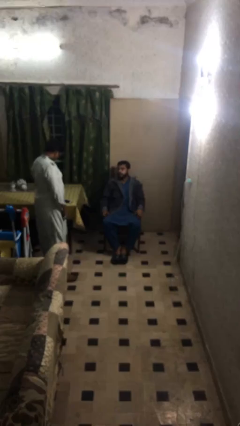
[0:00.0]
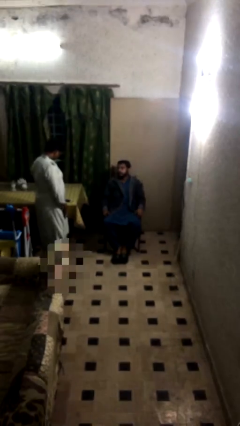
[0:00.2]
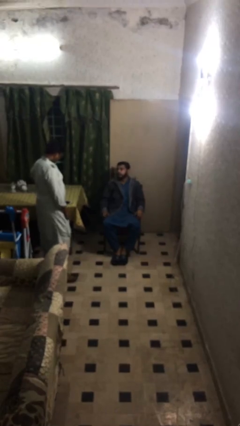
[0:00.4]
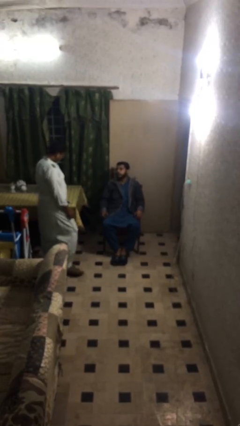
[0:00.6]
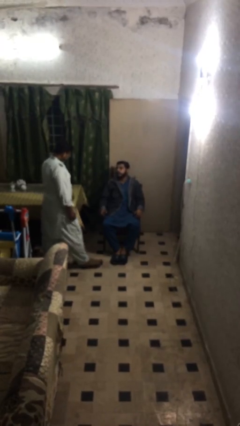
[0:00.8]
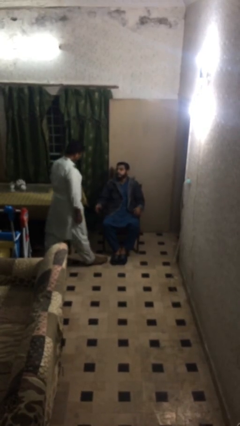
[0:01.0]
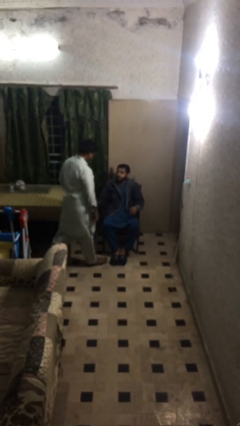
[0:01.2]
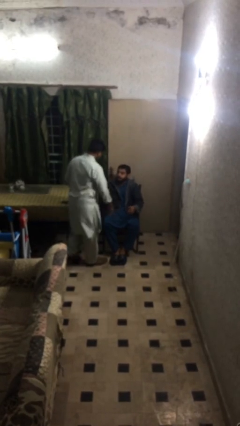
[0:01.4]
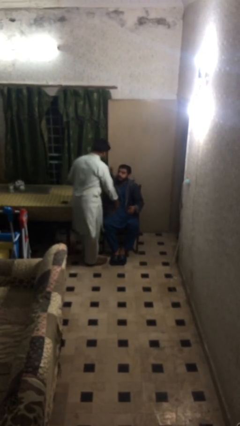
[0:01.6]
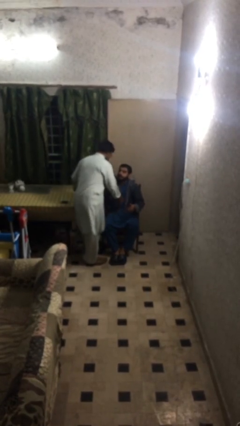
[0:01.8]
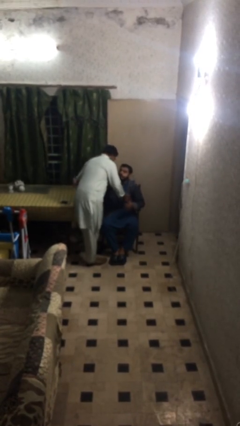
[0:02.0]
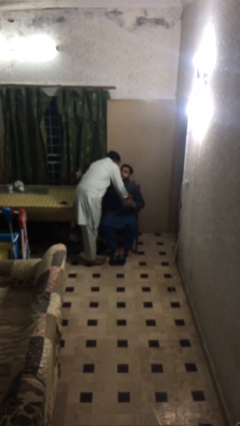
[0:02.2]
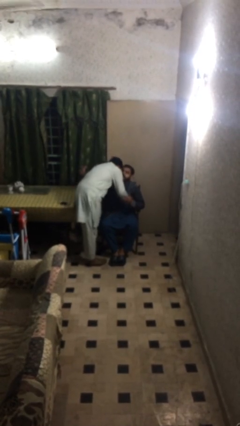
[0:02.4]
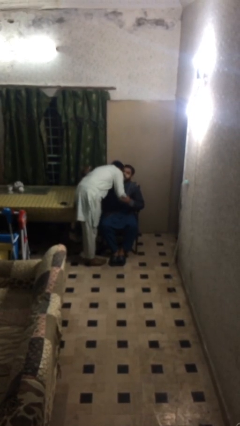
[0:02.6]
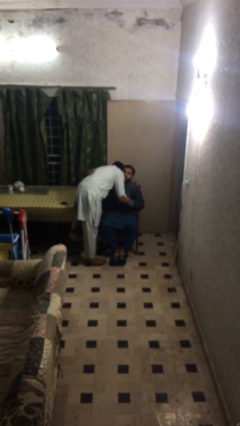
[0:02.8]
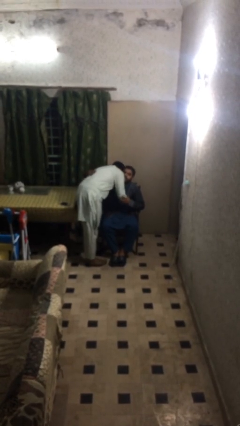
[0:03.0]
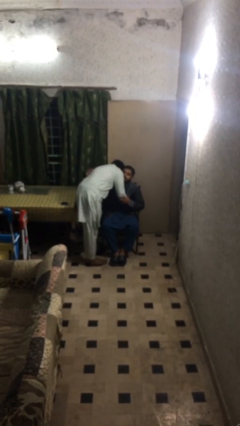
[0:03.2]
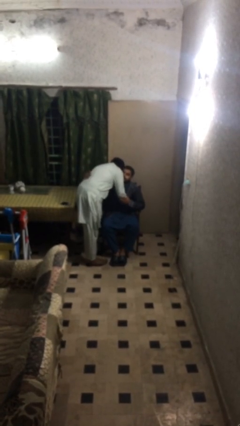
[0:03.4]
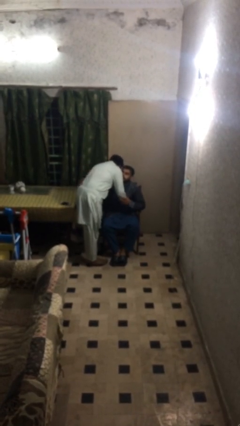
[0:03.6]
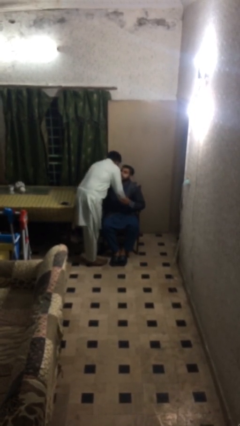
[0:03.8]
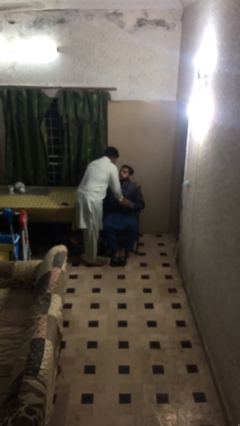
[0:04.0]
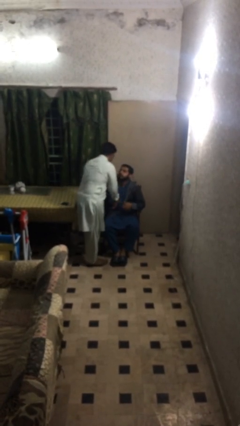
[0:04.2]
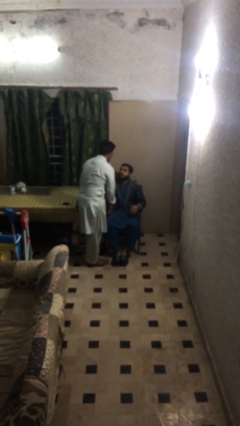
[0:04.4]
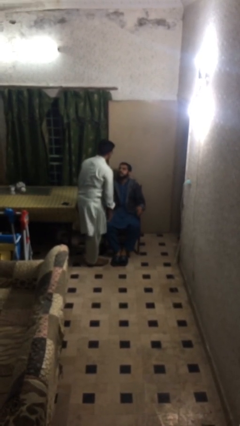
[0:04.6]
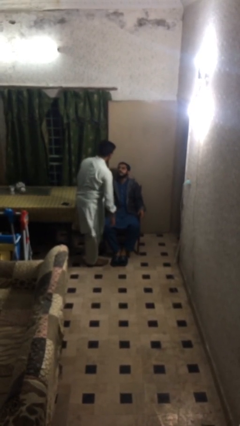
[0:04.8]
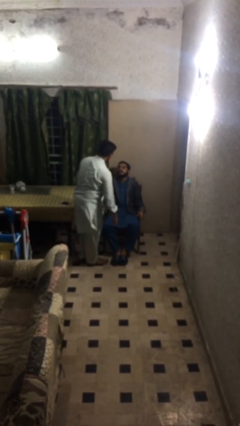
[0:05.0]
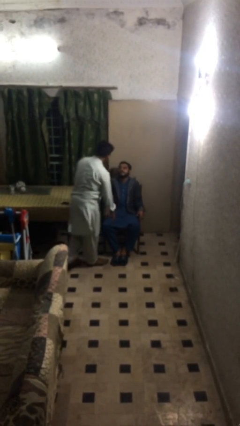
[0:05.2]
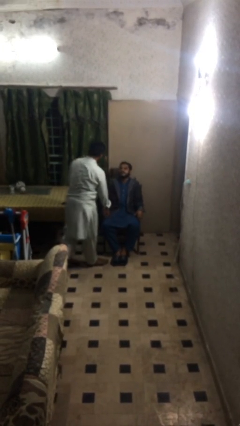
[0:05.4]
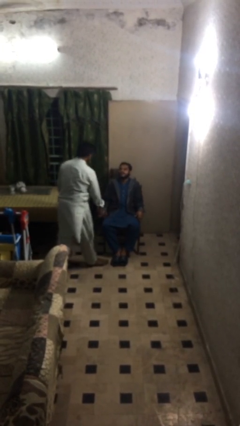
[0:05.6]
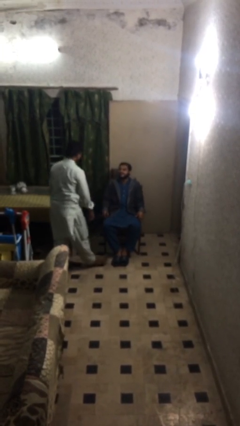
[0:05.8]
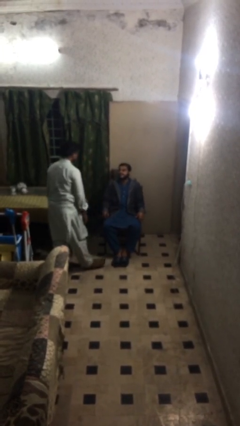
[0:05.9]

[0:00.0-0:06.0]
person embraces person

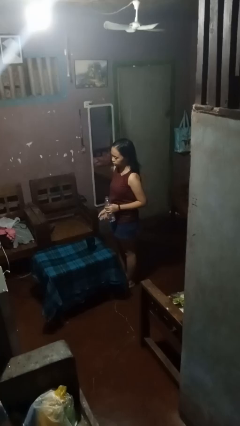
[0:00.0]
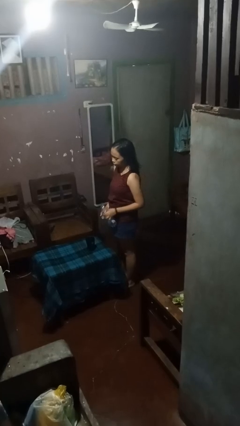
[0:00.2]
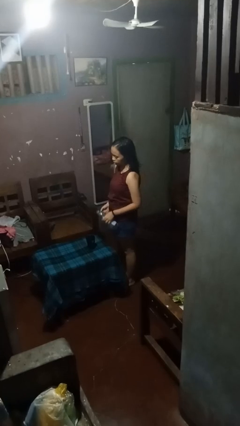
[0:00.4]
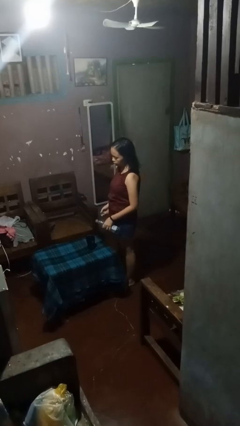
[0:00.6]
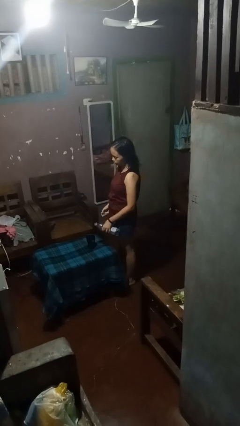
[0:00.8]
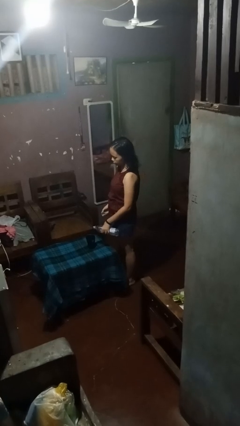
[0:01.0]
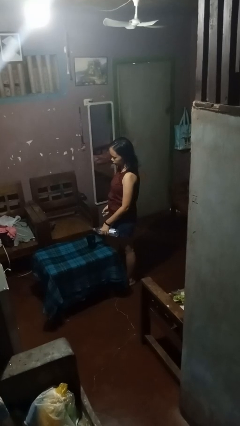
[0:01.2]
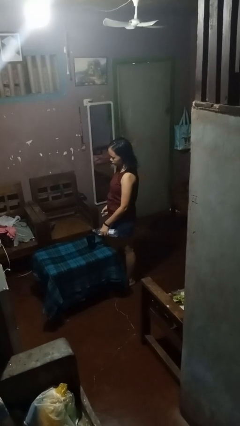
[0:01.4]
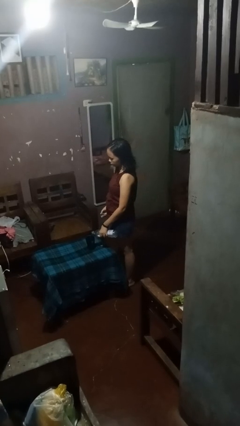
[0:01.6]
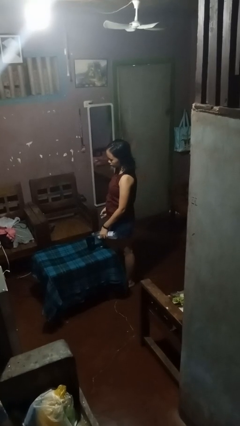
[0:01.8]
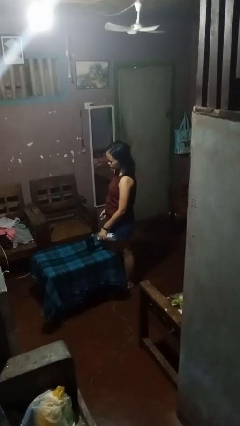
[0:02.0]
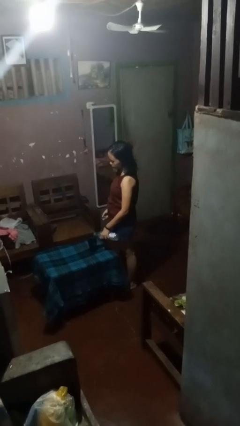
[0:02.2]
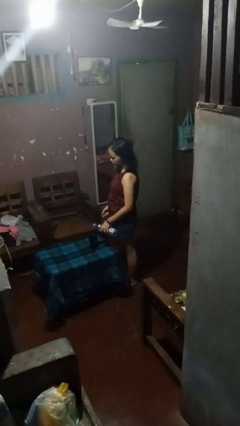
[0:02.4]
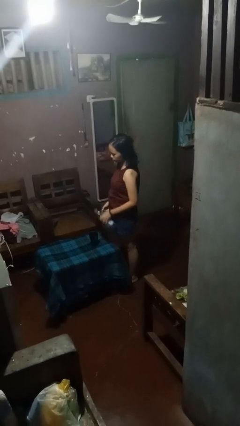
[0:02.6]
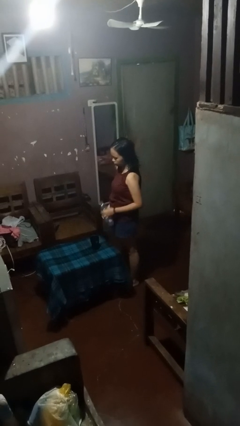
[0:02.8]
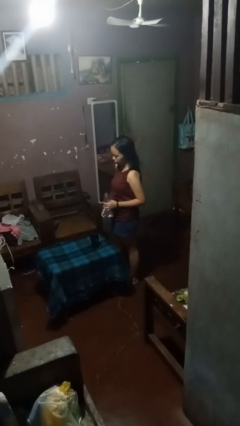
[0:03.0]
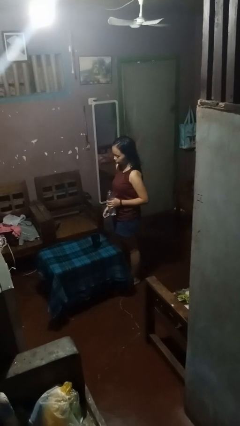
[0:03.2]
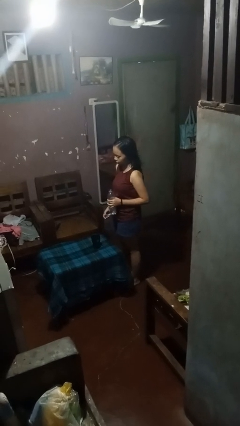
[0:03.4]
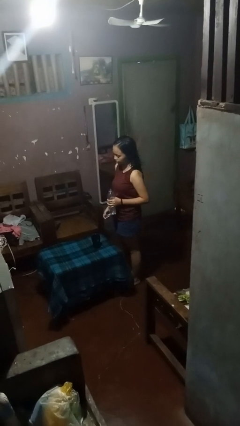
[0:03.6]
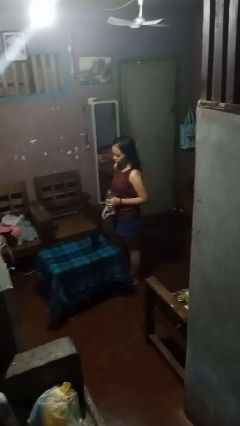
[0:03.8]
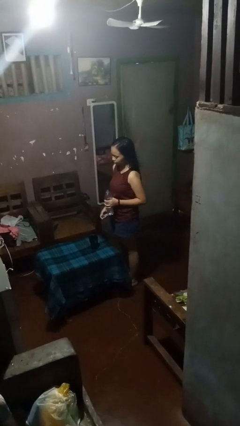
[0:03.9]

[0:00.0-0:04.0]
person pours liquid into cup

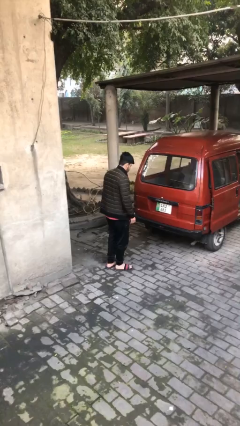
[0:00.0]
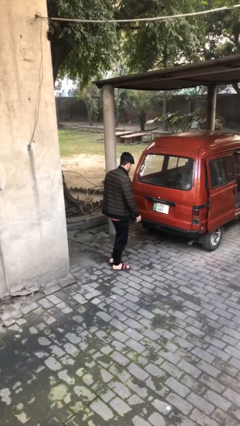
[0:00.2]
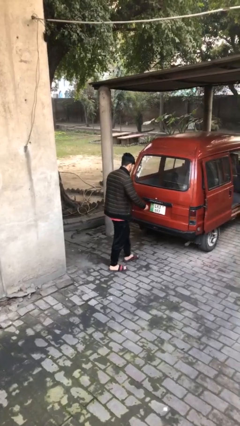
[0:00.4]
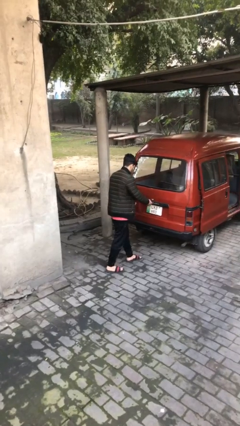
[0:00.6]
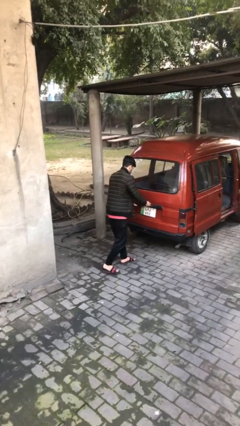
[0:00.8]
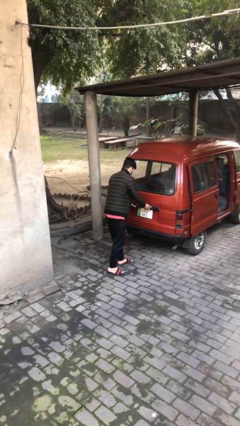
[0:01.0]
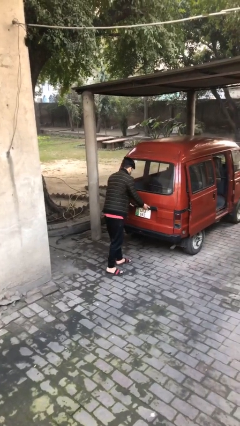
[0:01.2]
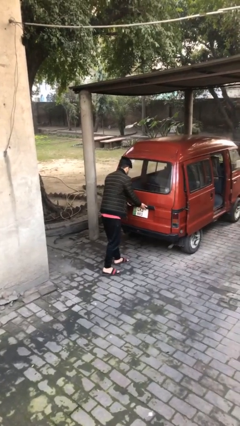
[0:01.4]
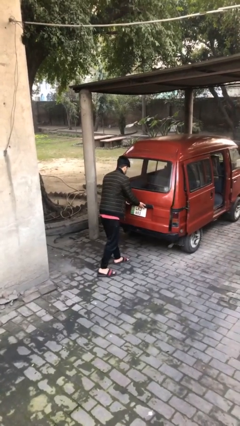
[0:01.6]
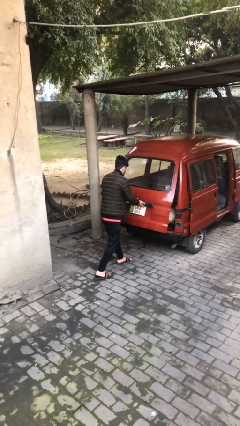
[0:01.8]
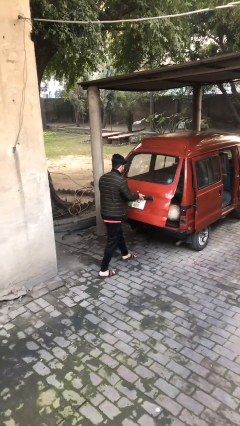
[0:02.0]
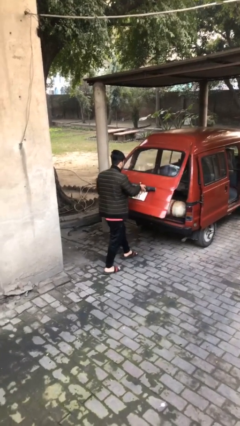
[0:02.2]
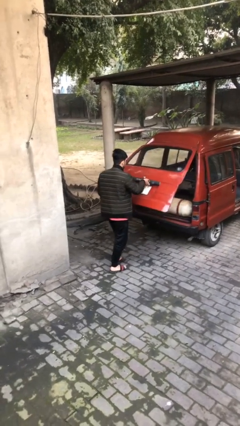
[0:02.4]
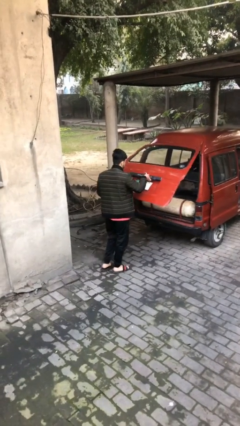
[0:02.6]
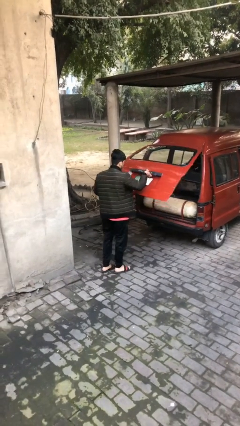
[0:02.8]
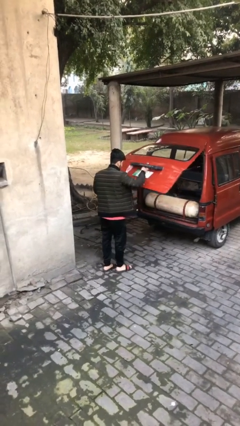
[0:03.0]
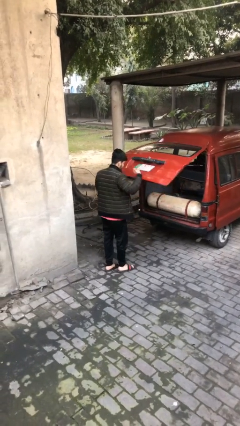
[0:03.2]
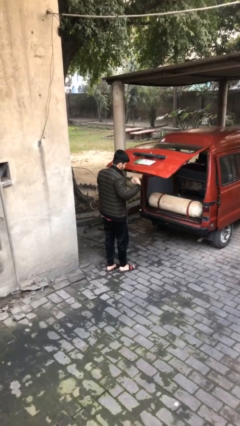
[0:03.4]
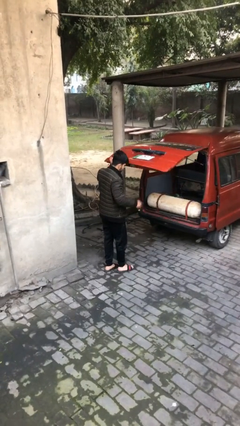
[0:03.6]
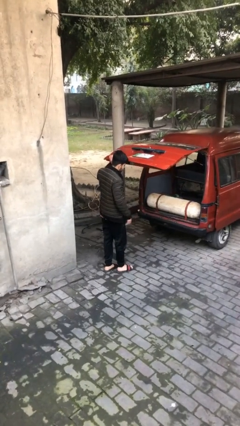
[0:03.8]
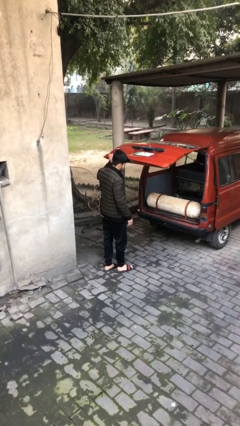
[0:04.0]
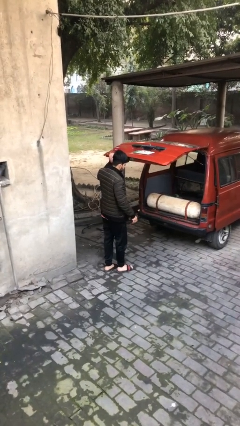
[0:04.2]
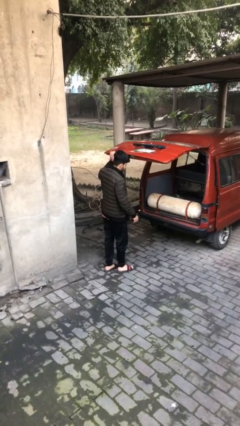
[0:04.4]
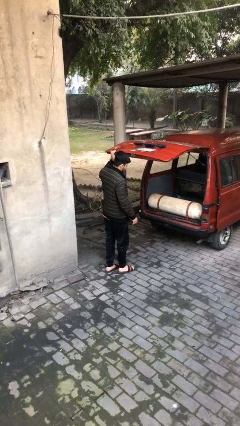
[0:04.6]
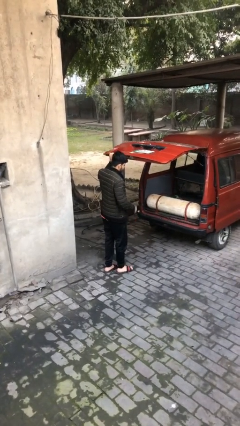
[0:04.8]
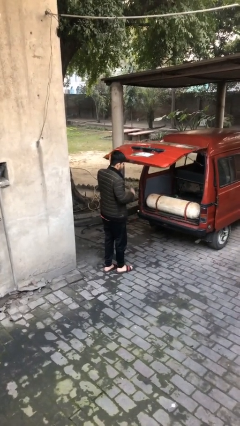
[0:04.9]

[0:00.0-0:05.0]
person opens car trunk

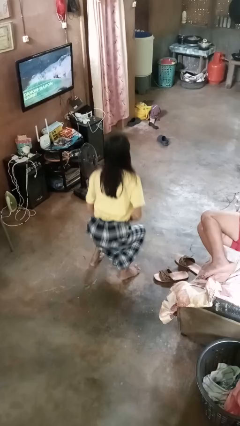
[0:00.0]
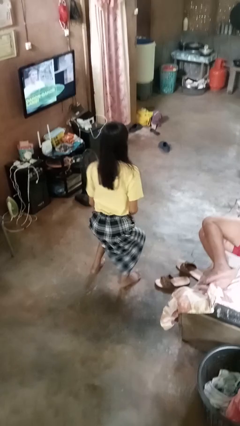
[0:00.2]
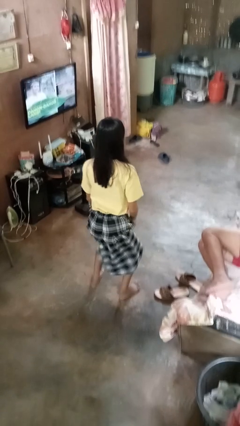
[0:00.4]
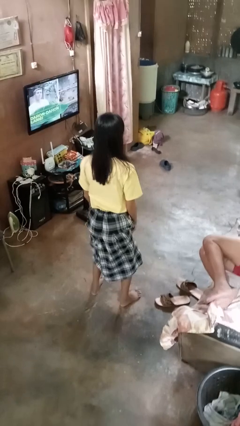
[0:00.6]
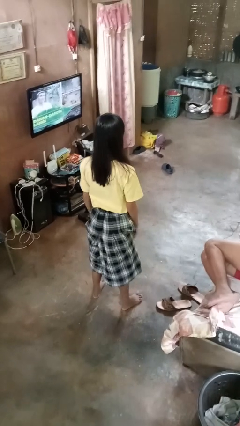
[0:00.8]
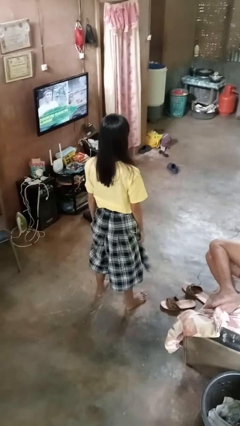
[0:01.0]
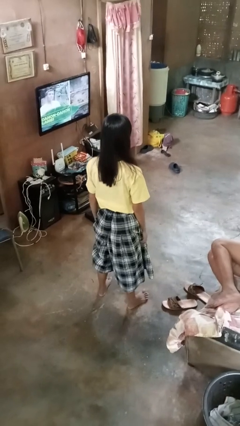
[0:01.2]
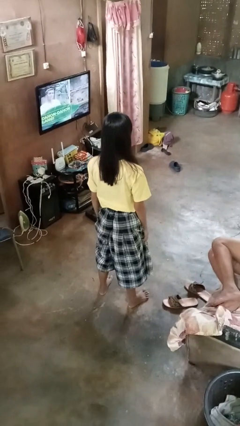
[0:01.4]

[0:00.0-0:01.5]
person stands up

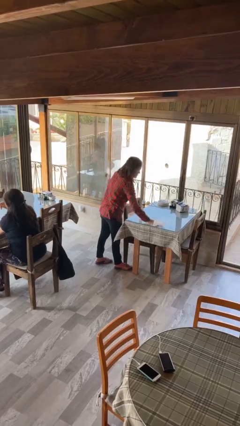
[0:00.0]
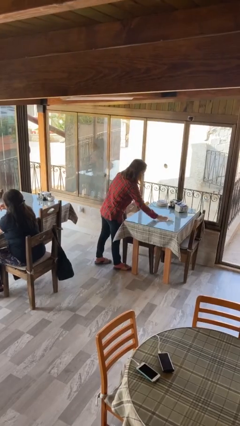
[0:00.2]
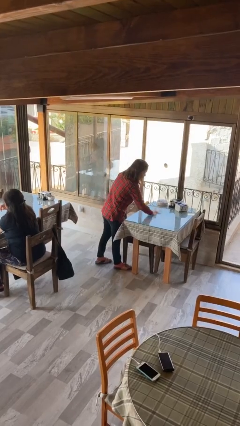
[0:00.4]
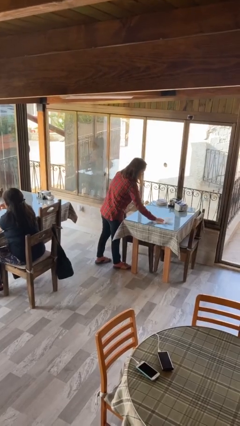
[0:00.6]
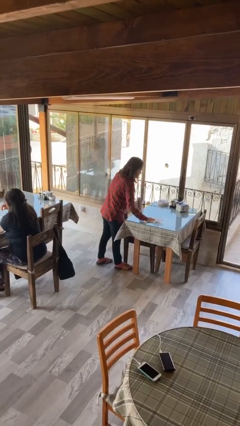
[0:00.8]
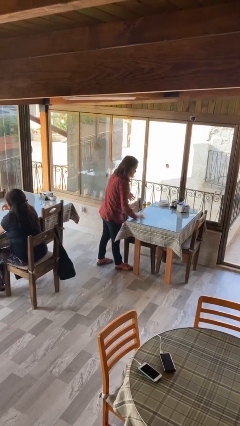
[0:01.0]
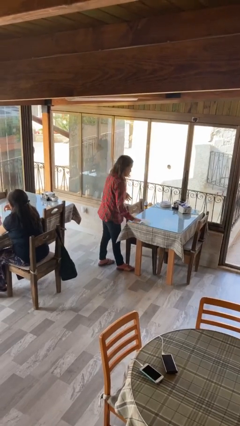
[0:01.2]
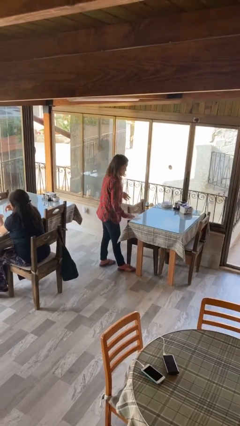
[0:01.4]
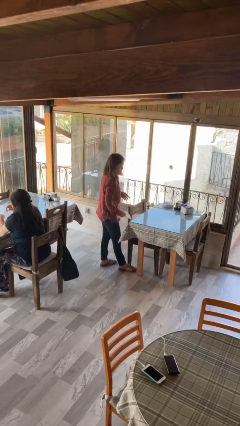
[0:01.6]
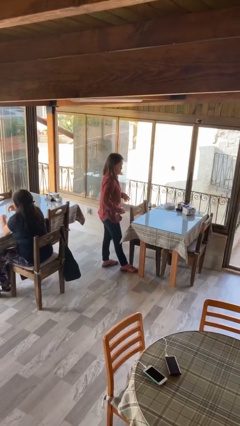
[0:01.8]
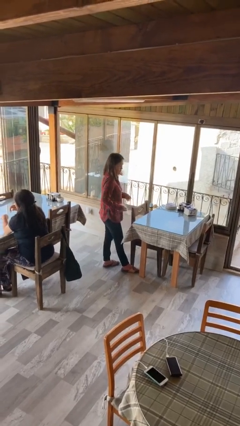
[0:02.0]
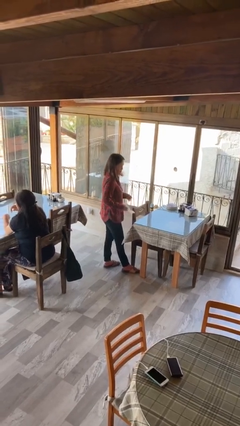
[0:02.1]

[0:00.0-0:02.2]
person cleans table with rag
